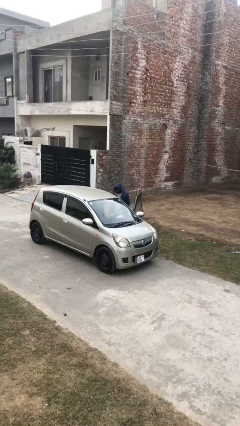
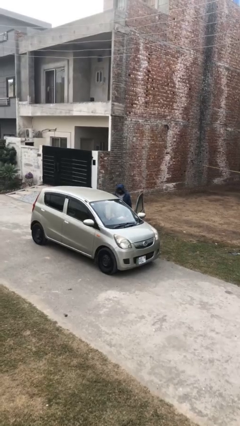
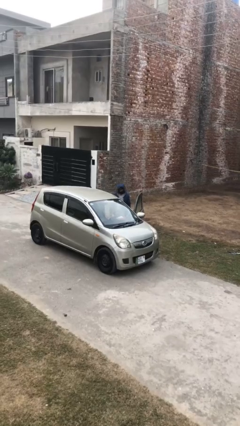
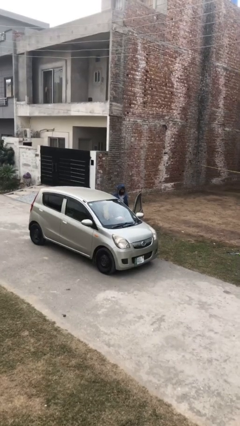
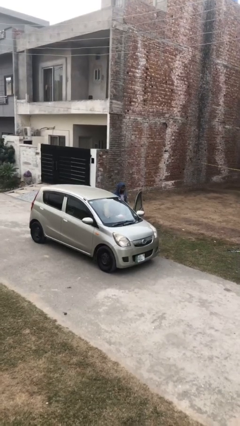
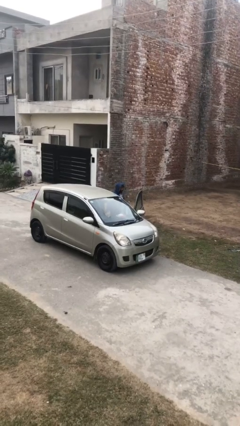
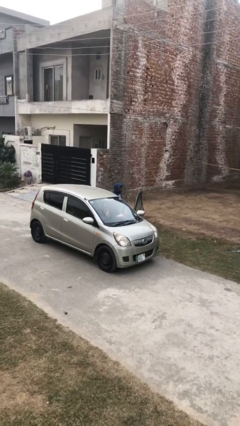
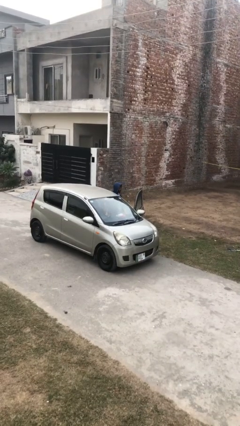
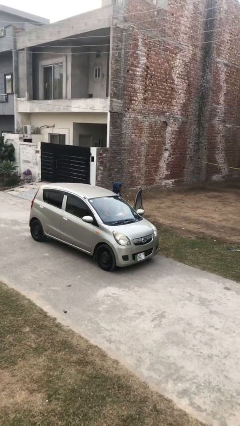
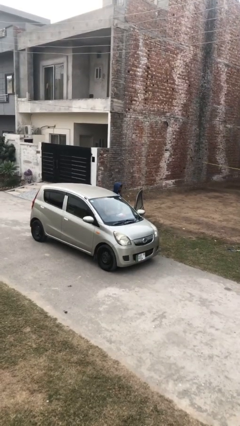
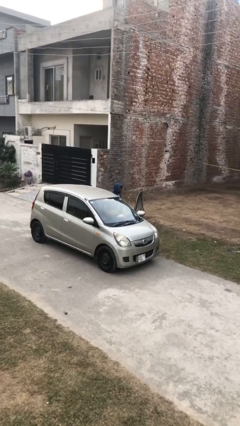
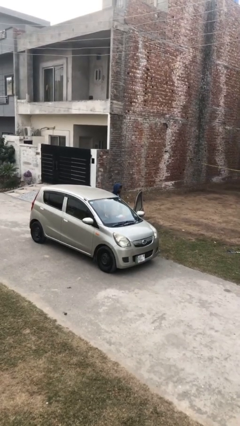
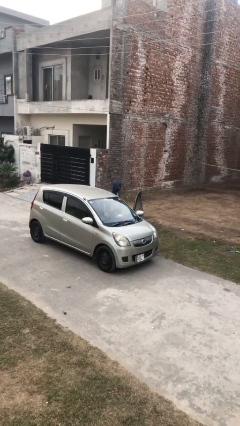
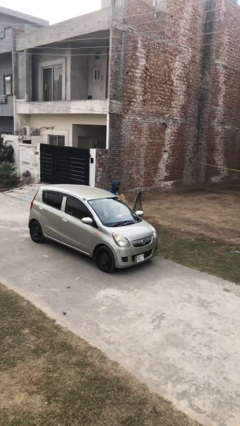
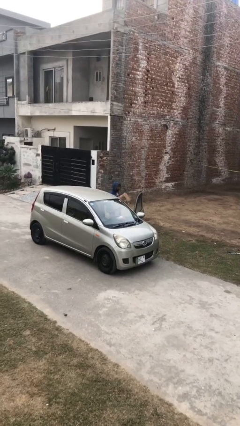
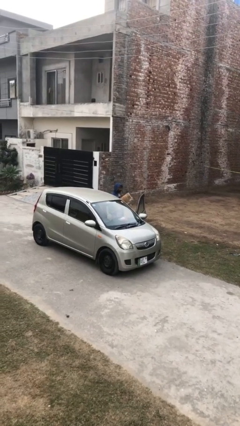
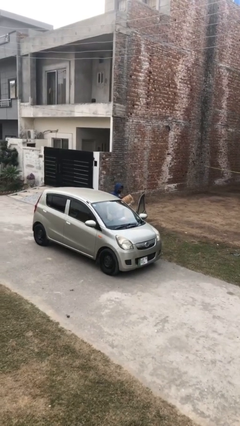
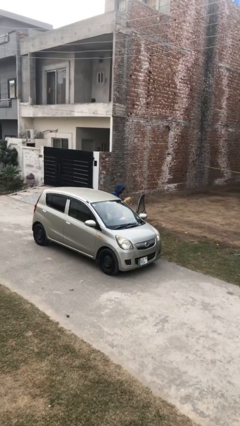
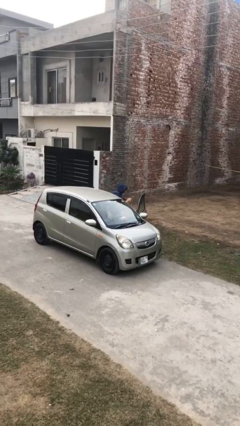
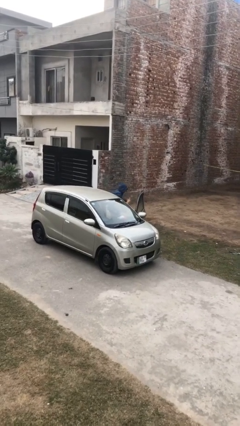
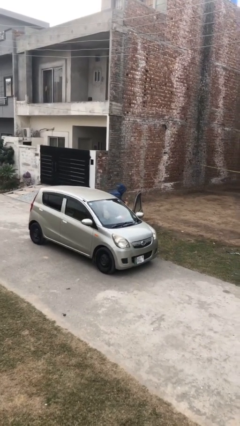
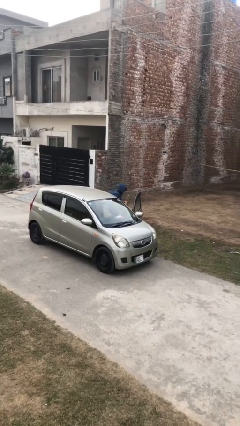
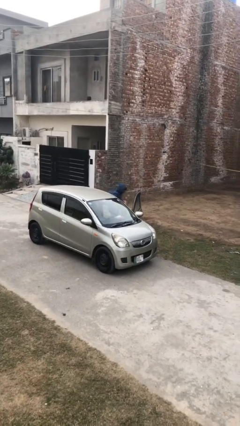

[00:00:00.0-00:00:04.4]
person unloads car

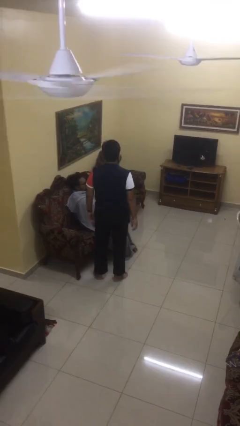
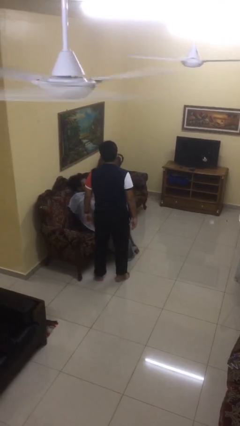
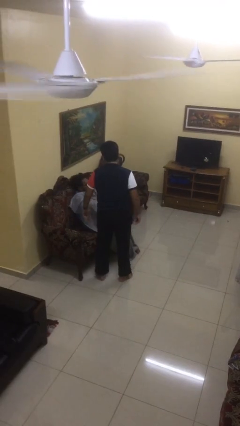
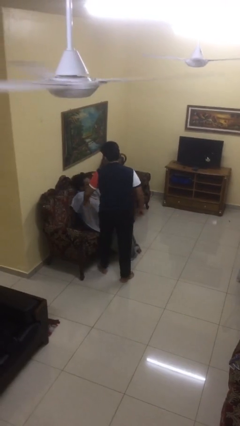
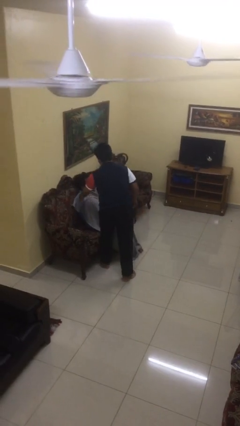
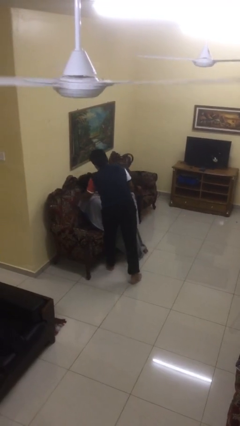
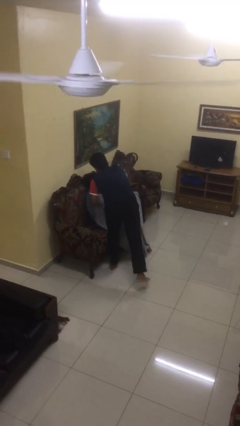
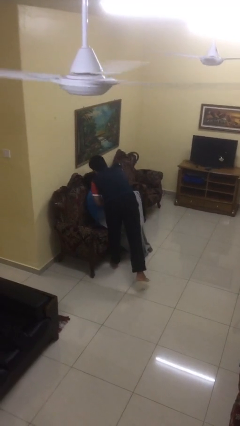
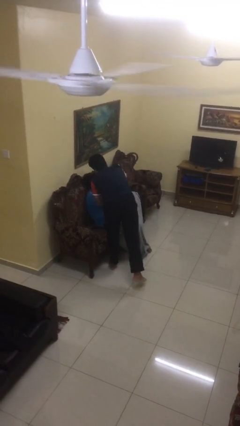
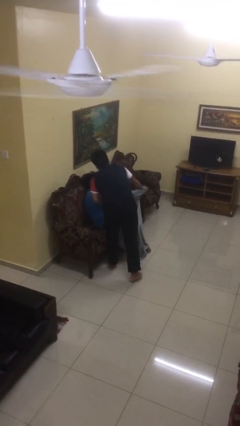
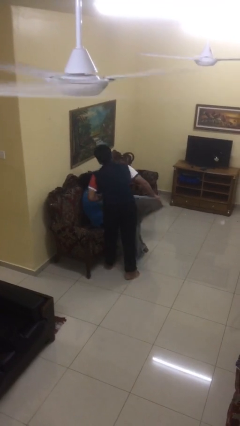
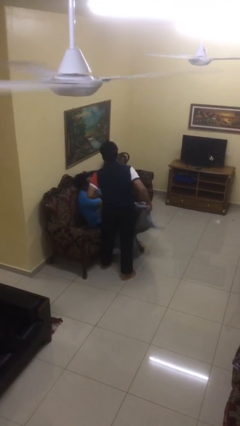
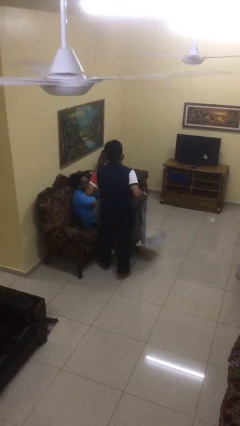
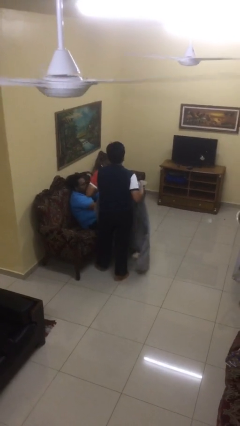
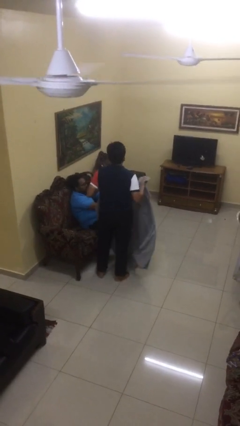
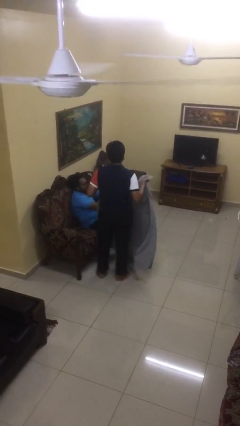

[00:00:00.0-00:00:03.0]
person uncovers friend with blanket

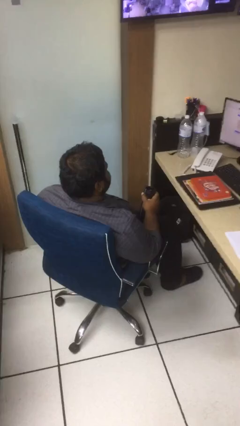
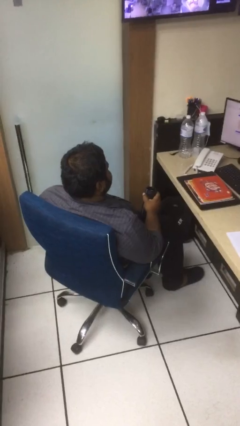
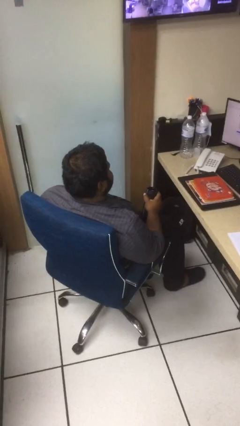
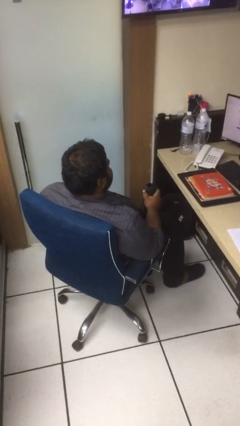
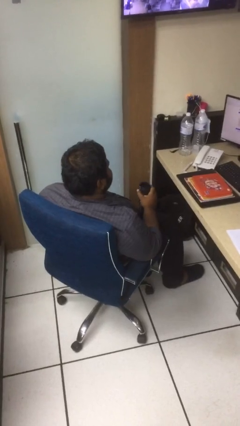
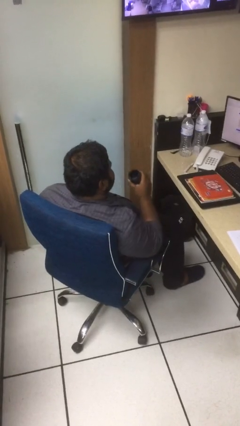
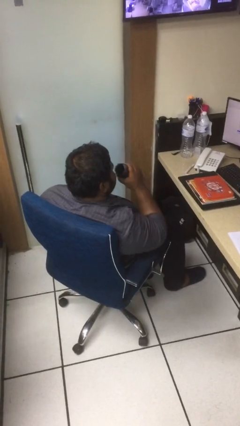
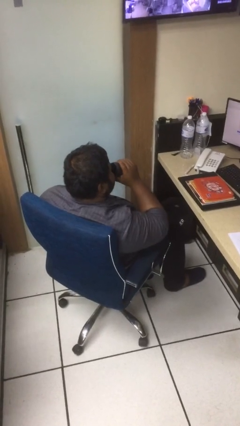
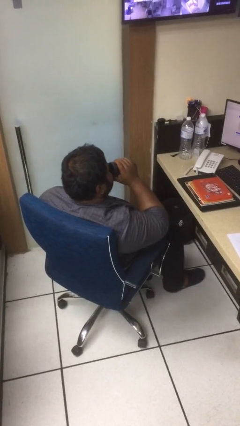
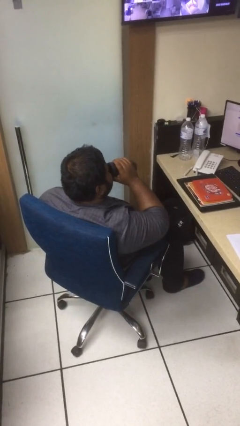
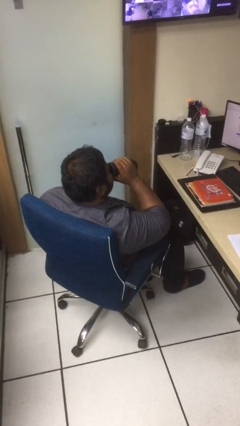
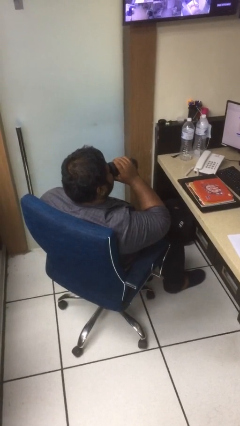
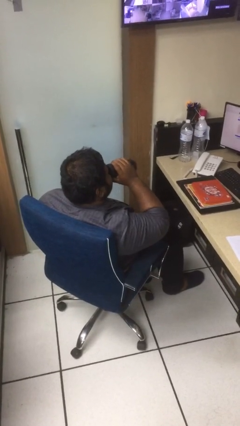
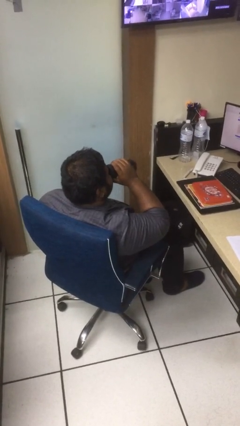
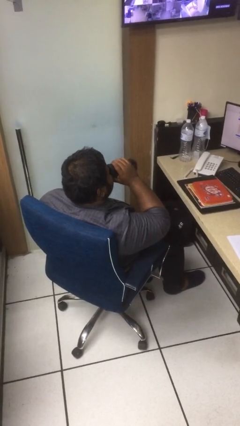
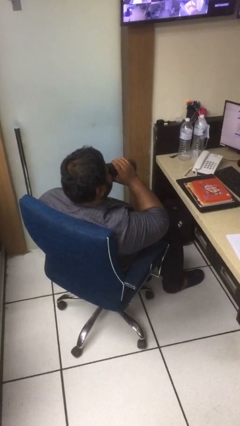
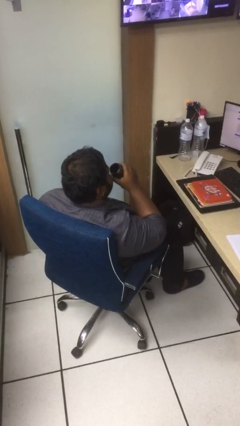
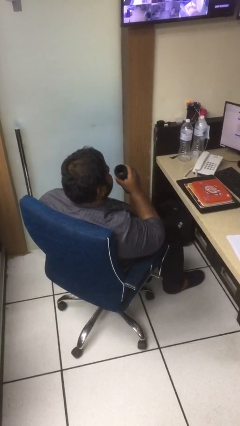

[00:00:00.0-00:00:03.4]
person drinks from bottle

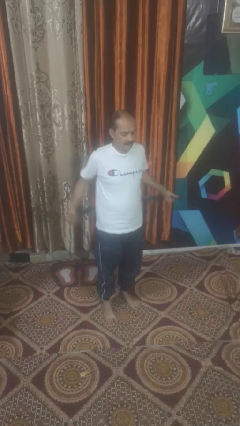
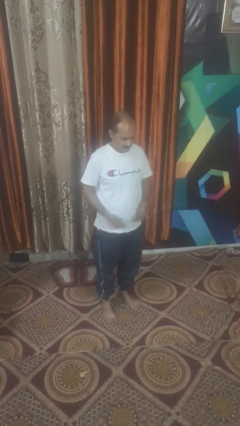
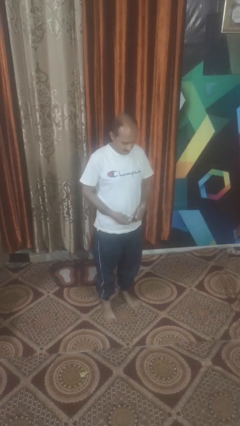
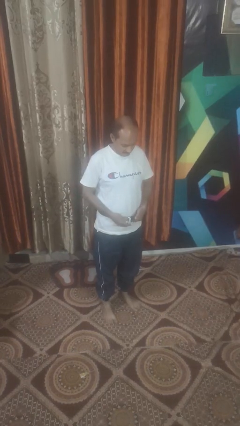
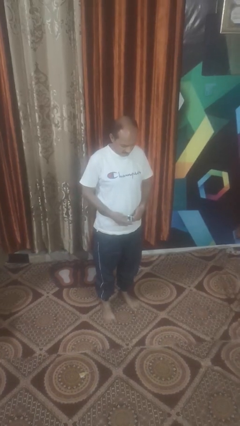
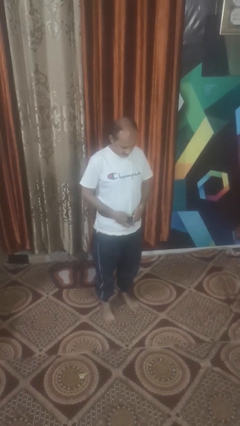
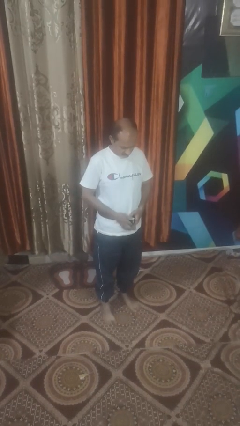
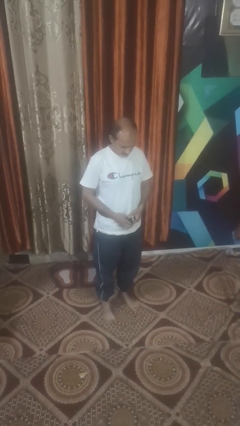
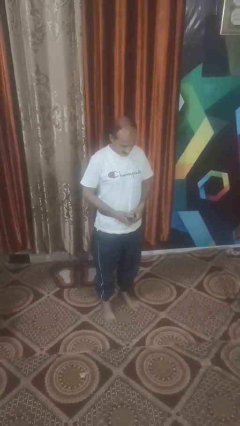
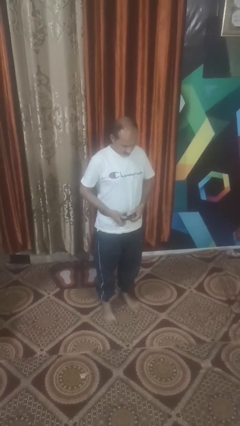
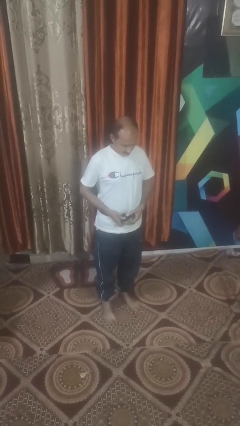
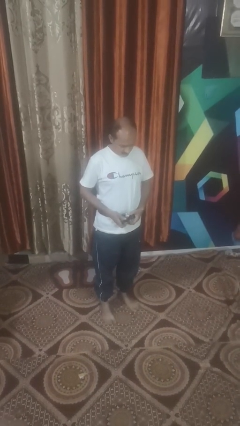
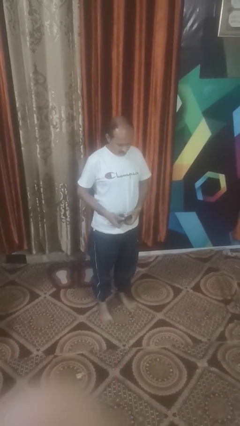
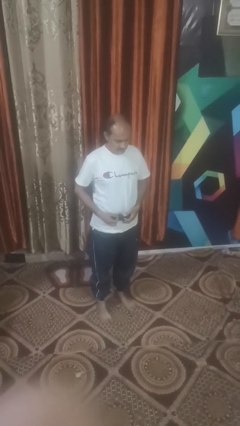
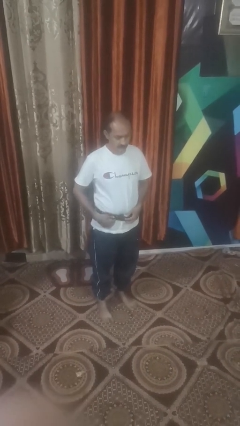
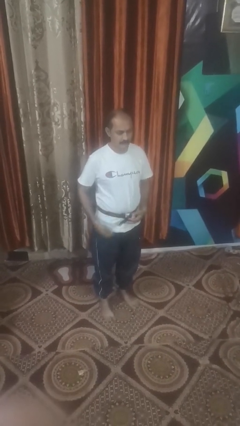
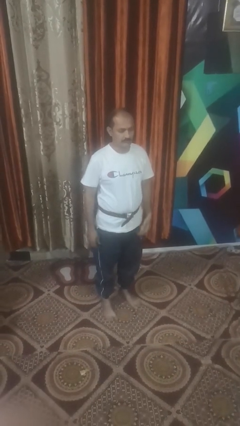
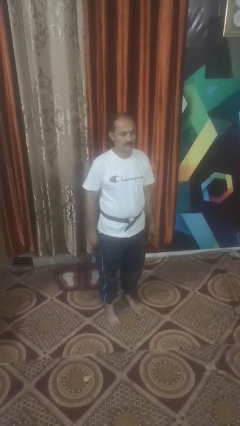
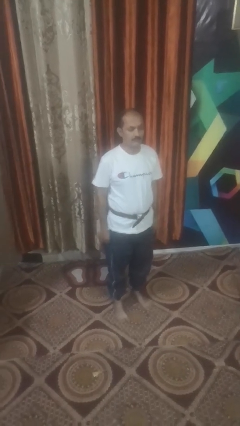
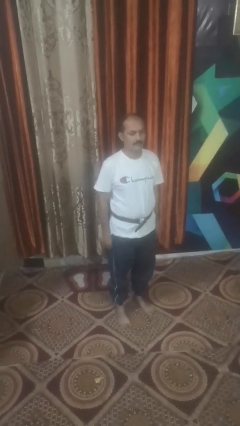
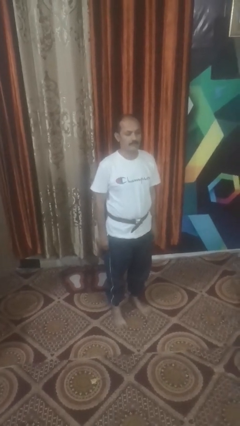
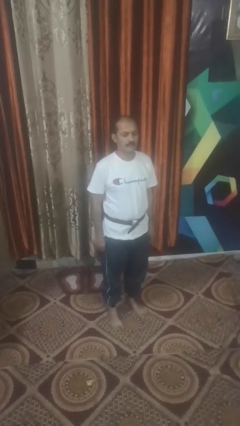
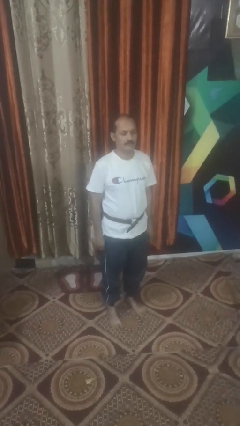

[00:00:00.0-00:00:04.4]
person puts on belt

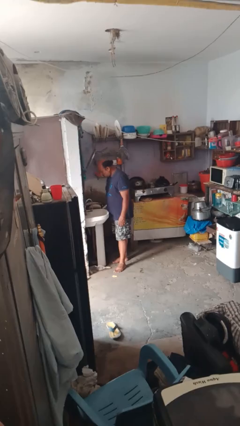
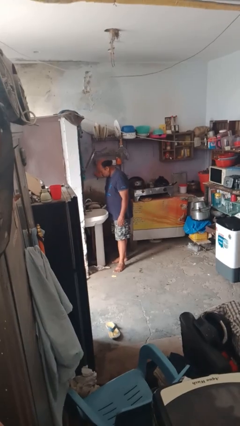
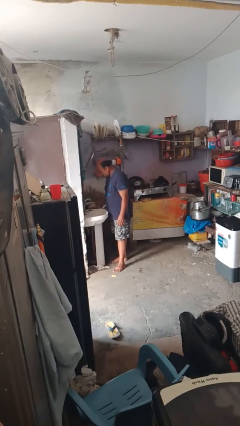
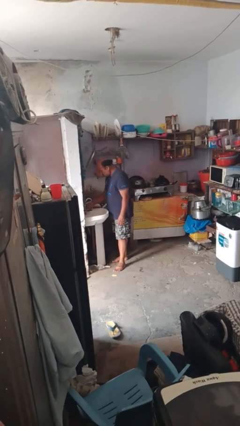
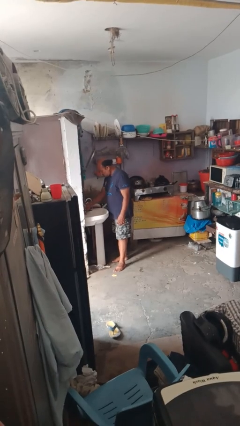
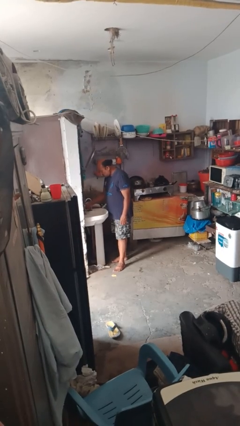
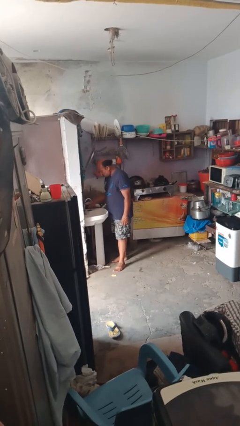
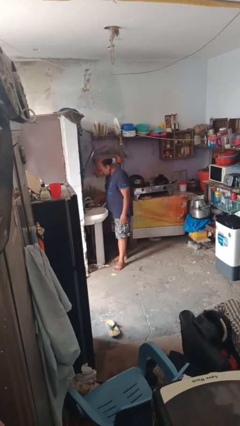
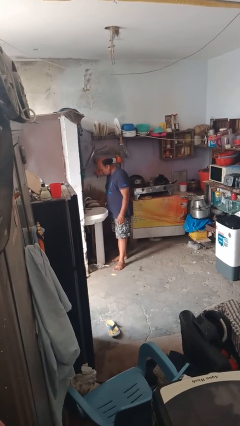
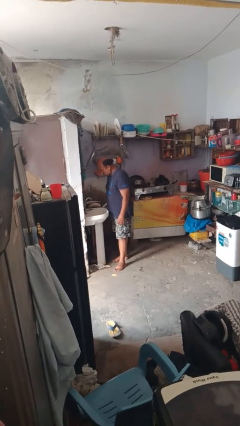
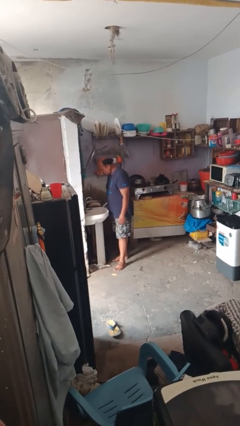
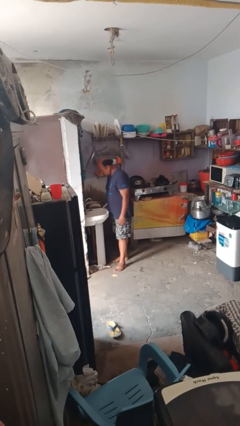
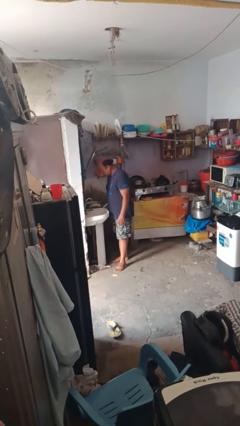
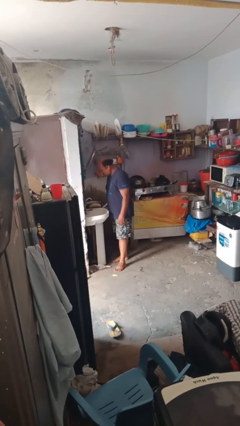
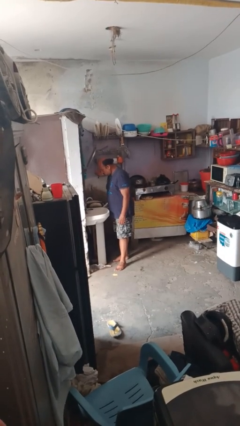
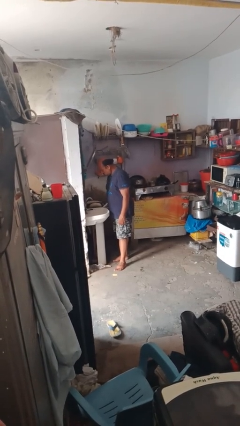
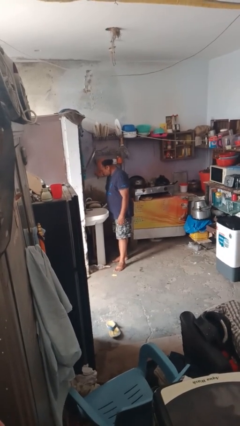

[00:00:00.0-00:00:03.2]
person turns off faucet
